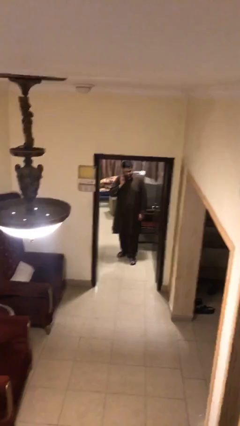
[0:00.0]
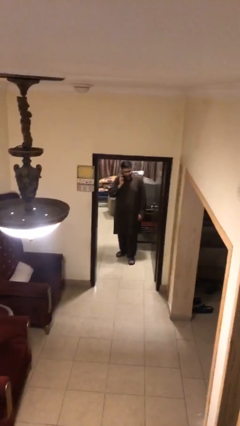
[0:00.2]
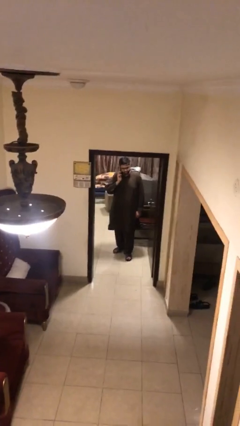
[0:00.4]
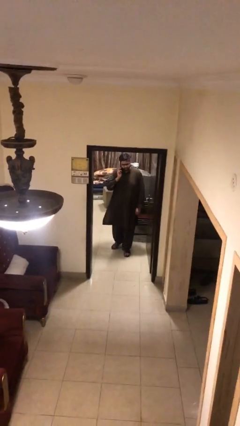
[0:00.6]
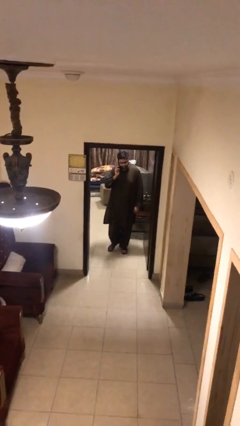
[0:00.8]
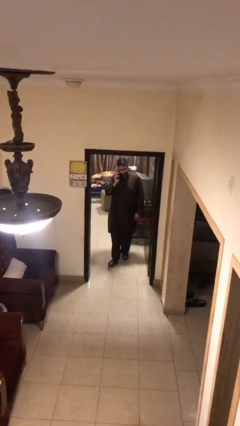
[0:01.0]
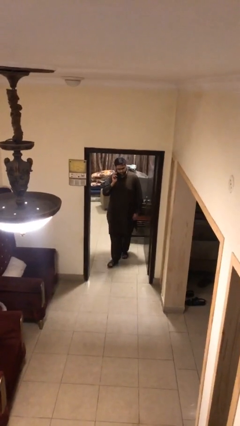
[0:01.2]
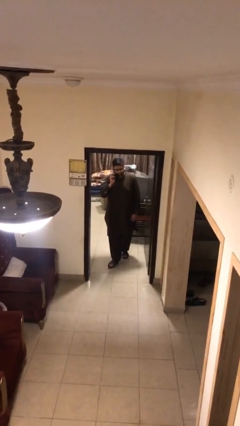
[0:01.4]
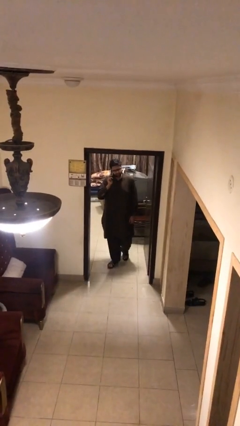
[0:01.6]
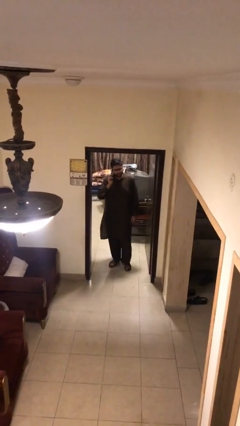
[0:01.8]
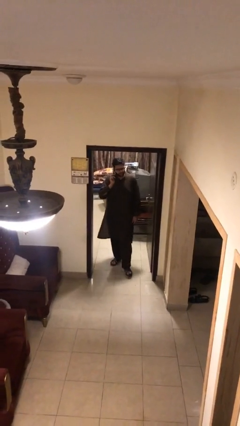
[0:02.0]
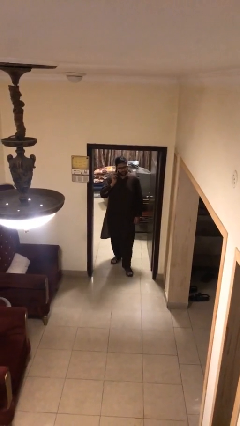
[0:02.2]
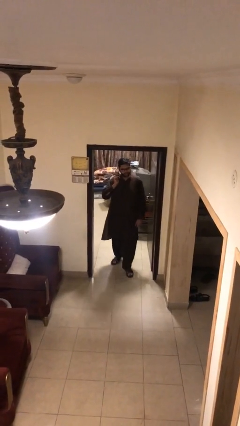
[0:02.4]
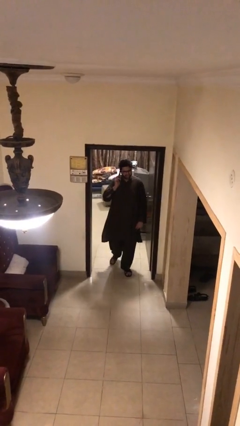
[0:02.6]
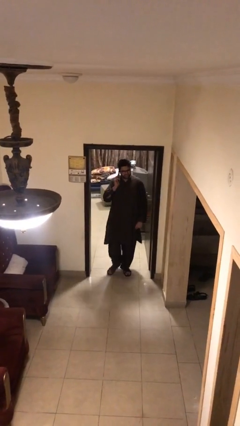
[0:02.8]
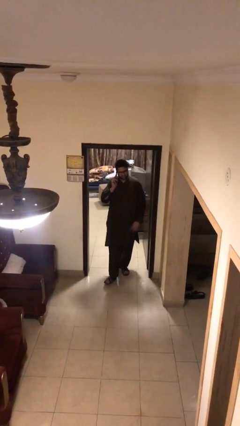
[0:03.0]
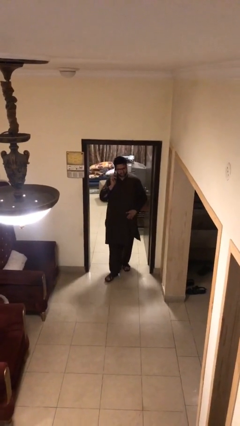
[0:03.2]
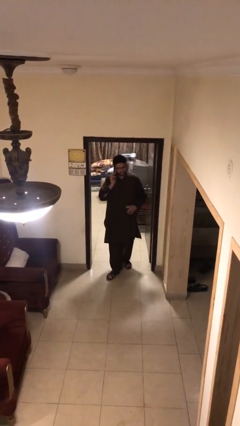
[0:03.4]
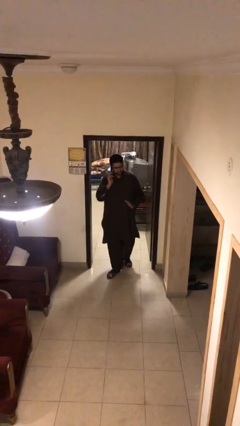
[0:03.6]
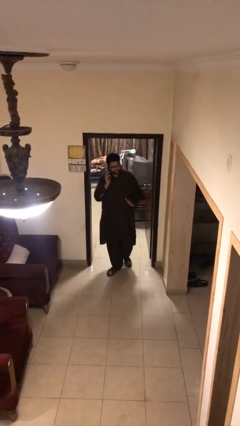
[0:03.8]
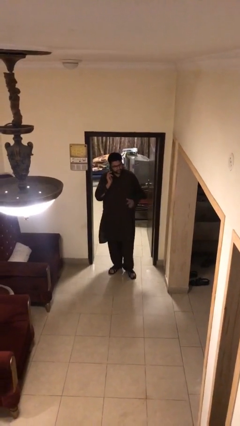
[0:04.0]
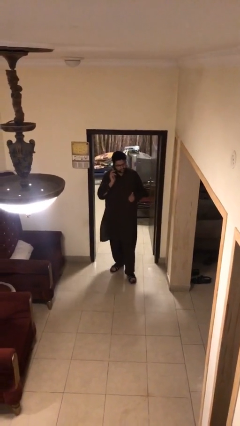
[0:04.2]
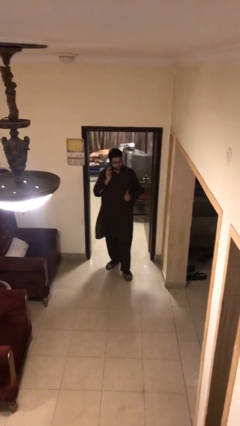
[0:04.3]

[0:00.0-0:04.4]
person enters scene through structure

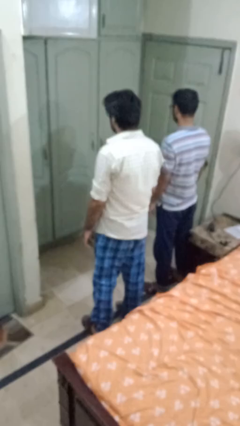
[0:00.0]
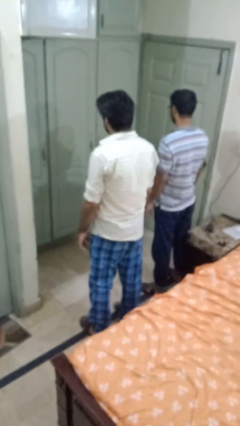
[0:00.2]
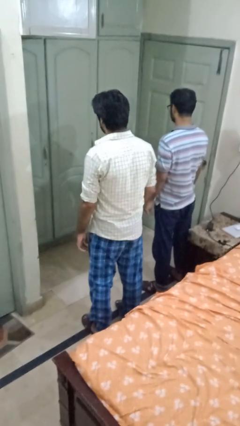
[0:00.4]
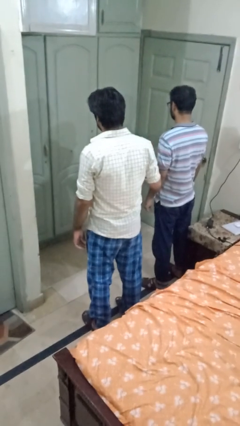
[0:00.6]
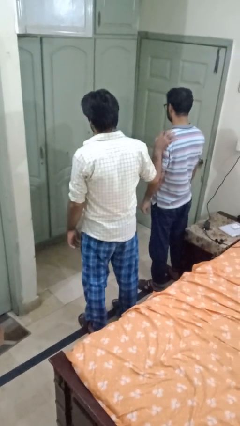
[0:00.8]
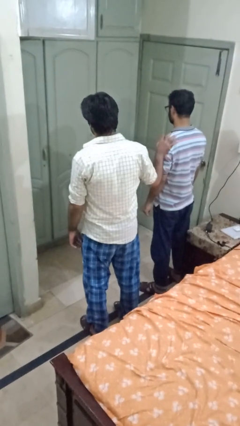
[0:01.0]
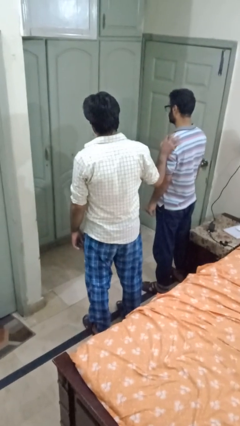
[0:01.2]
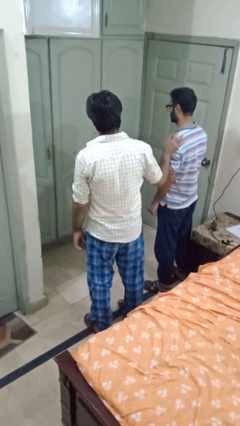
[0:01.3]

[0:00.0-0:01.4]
person grabs person by shoulder

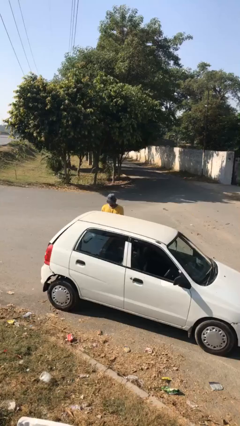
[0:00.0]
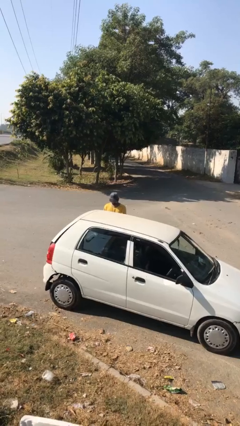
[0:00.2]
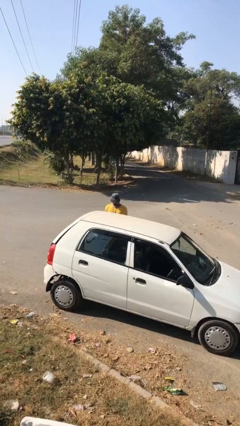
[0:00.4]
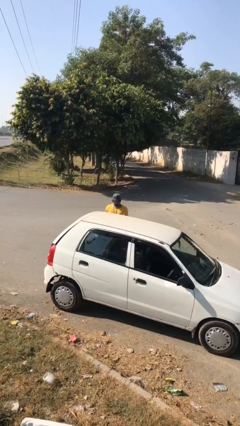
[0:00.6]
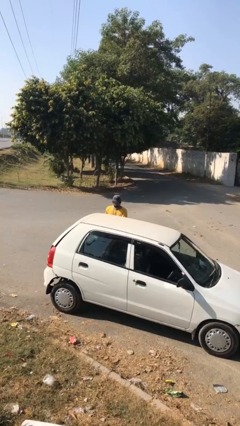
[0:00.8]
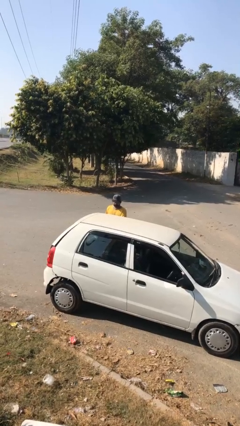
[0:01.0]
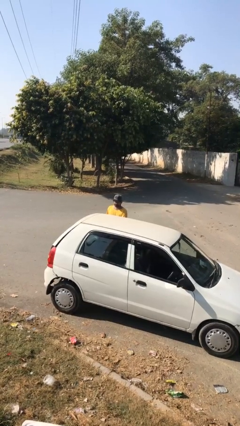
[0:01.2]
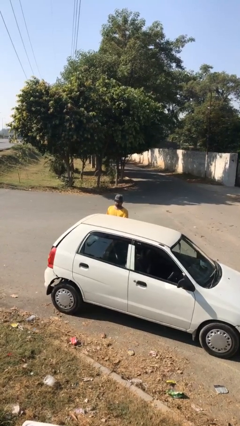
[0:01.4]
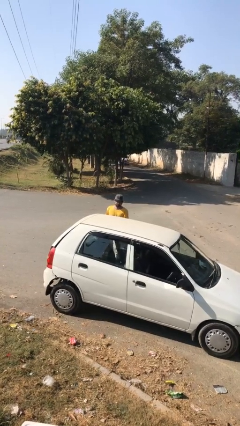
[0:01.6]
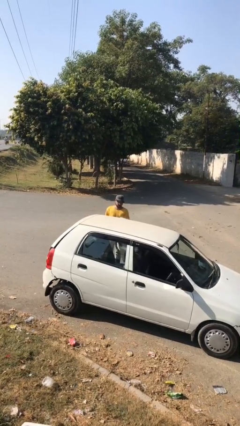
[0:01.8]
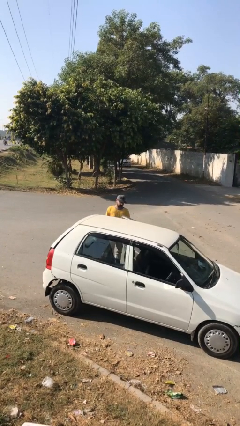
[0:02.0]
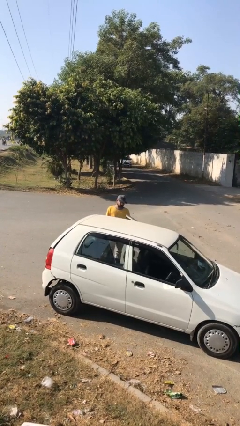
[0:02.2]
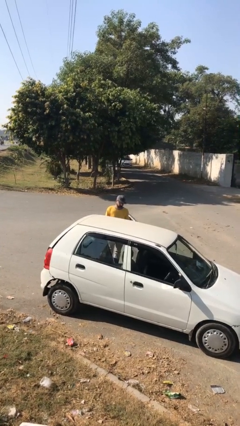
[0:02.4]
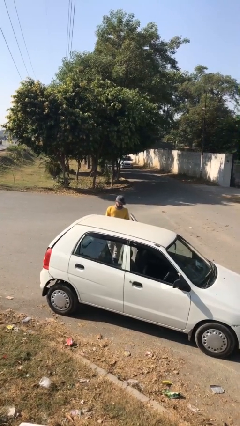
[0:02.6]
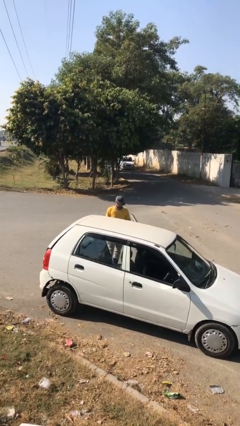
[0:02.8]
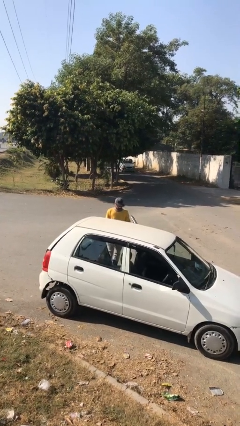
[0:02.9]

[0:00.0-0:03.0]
person opens car door

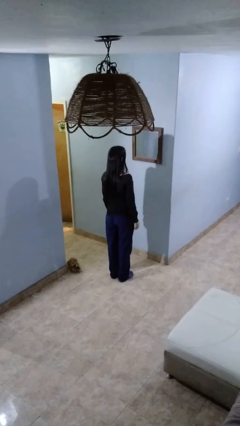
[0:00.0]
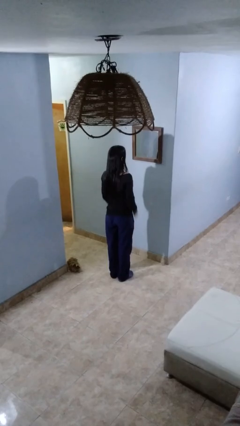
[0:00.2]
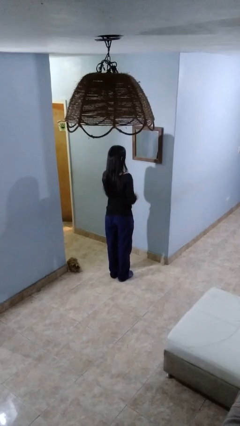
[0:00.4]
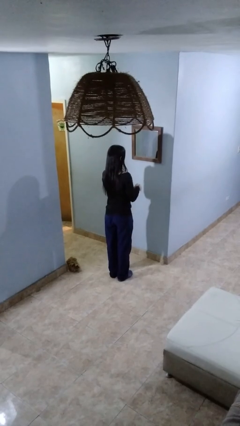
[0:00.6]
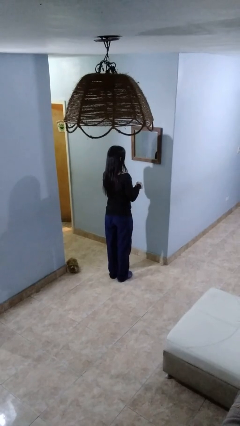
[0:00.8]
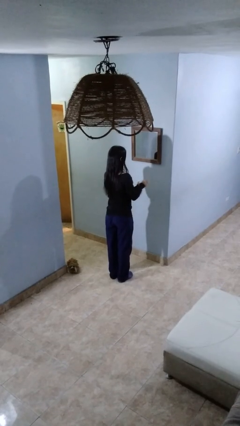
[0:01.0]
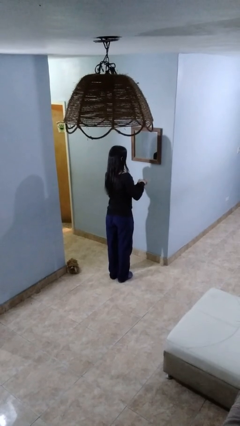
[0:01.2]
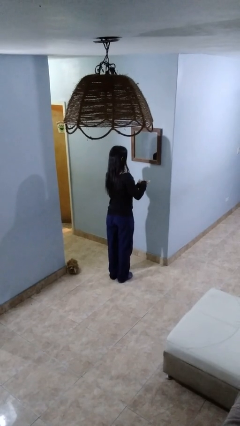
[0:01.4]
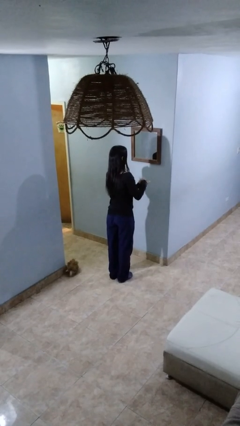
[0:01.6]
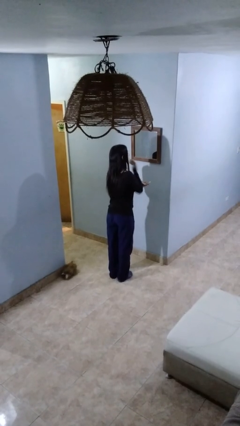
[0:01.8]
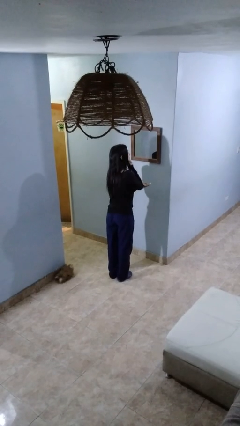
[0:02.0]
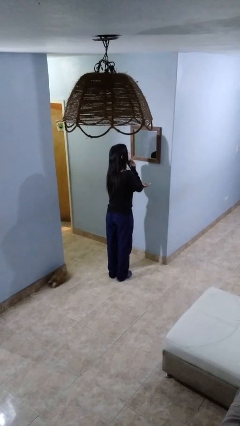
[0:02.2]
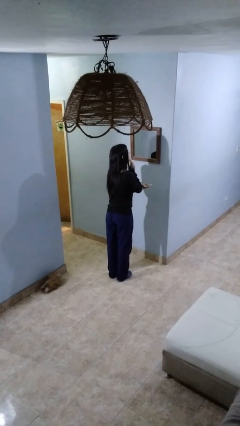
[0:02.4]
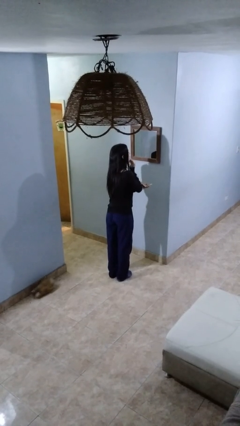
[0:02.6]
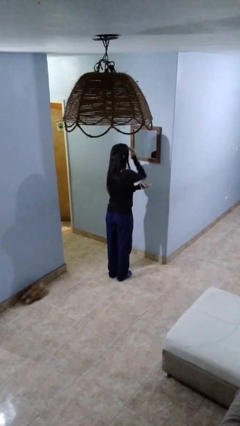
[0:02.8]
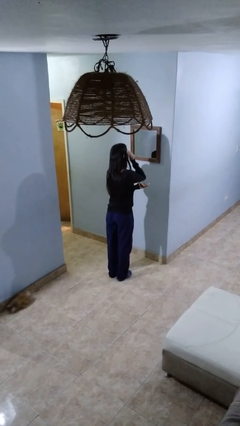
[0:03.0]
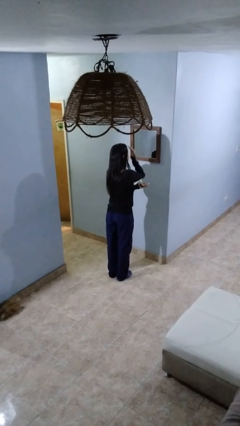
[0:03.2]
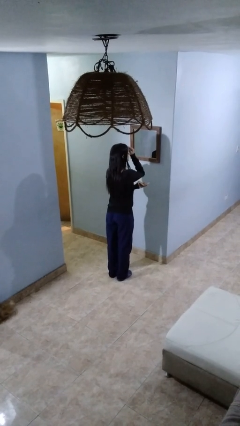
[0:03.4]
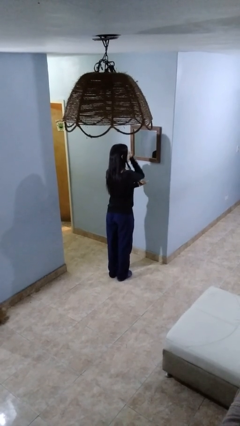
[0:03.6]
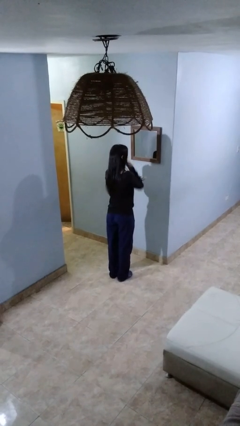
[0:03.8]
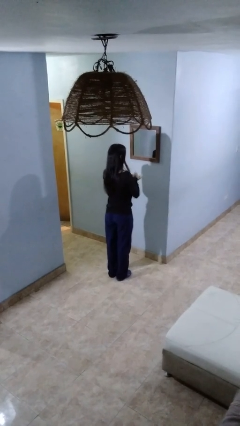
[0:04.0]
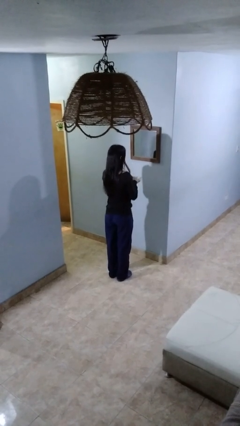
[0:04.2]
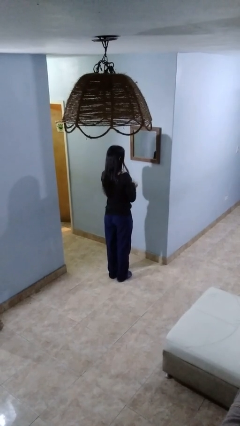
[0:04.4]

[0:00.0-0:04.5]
person applies foundation makeup

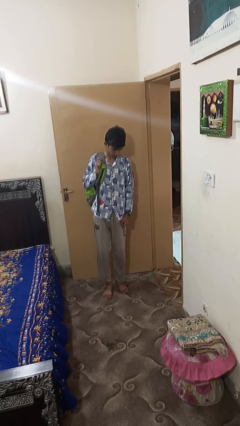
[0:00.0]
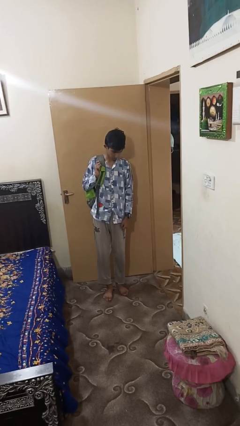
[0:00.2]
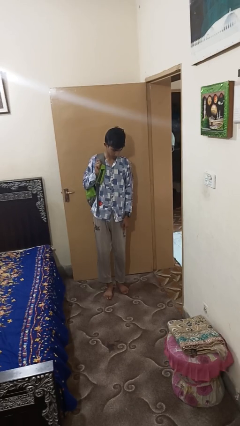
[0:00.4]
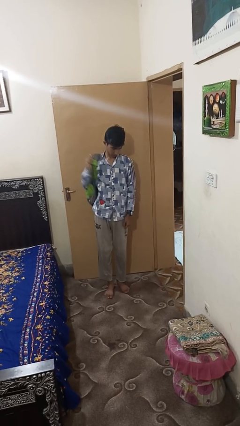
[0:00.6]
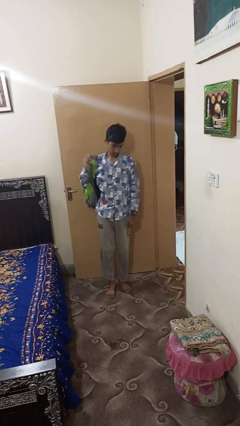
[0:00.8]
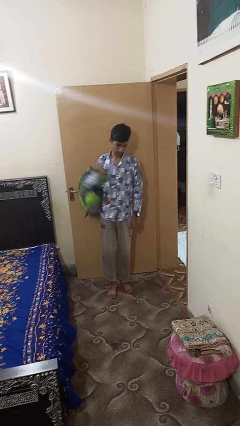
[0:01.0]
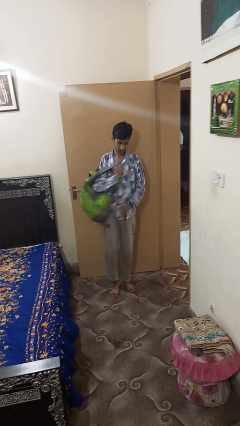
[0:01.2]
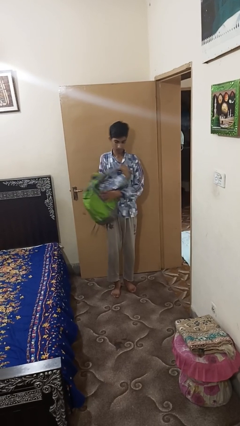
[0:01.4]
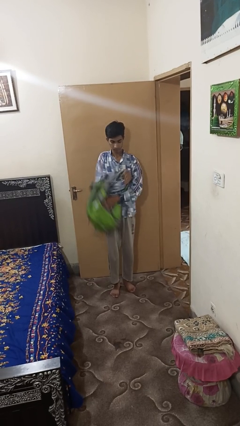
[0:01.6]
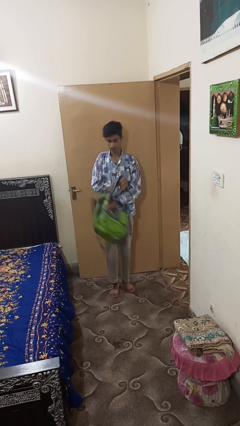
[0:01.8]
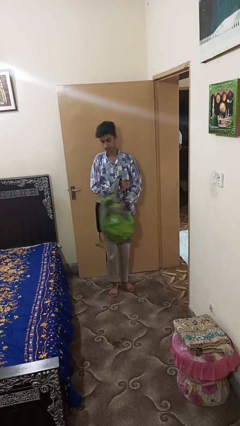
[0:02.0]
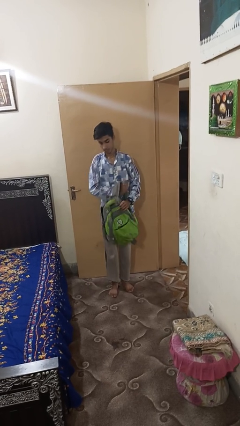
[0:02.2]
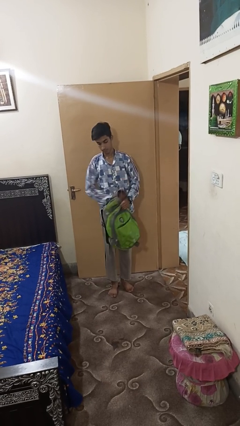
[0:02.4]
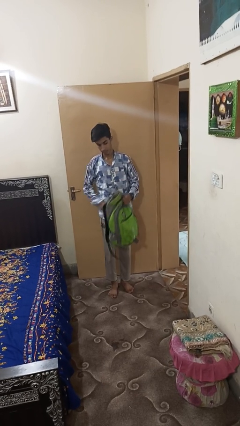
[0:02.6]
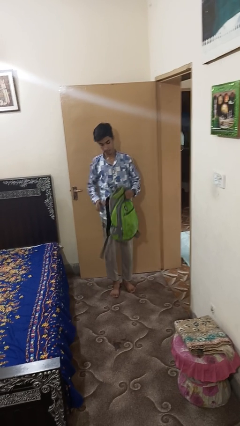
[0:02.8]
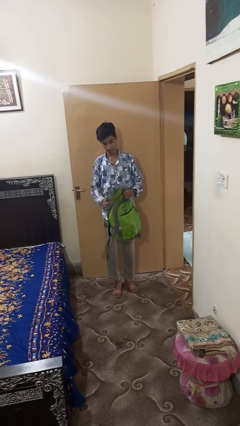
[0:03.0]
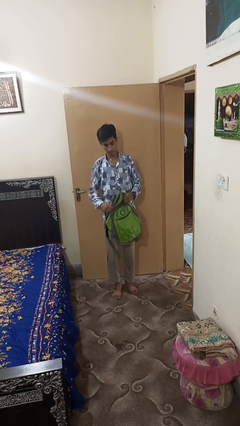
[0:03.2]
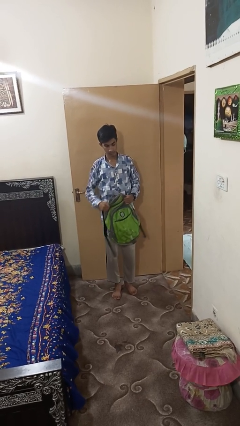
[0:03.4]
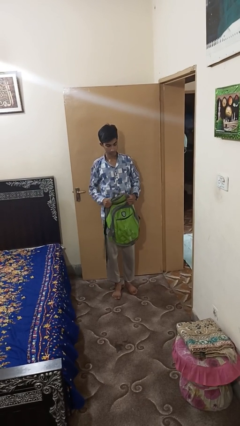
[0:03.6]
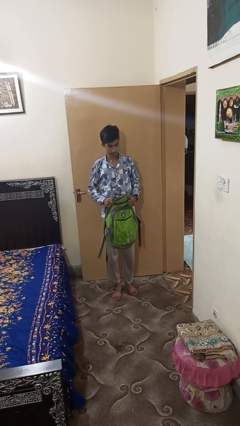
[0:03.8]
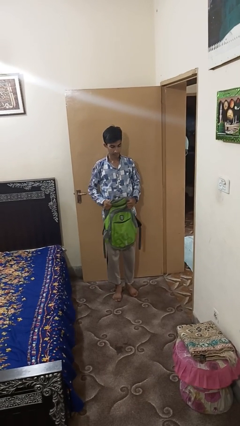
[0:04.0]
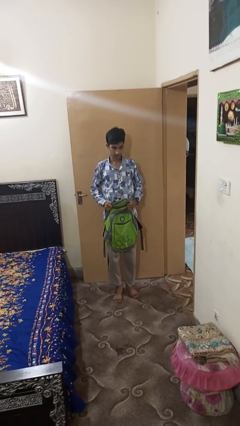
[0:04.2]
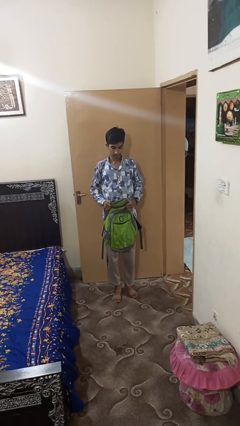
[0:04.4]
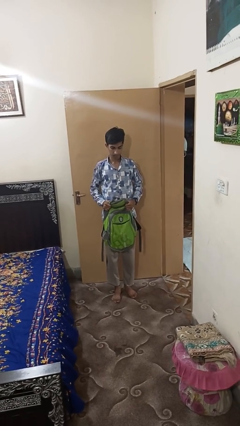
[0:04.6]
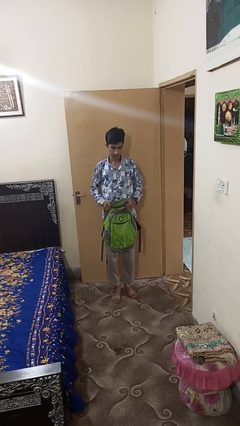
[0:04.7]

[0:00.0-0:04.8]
person takes off backpack
